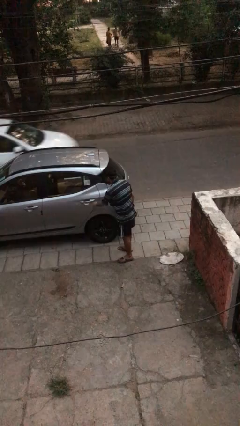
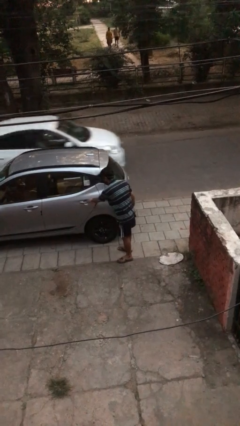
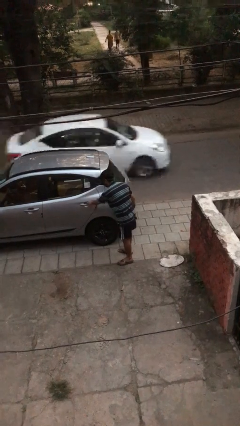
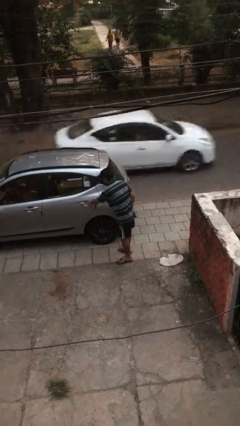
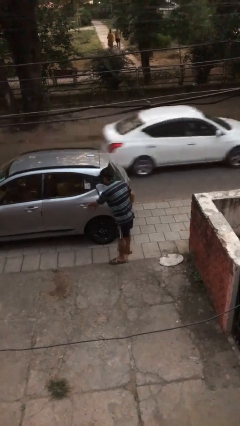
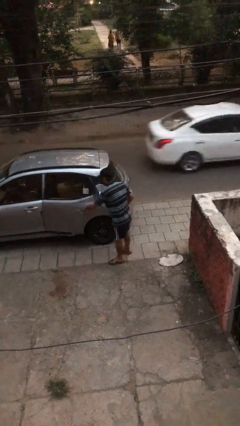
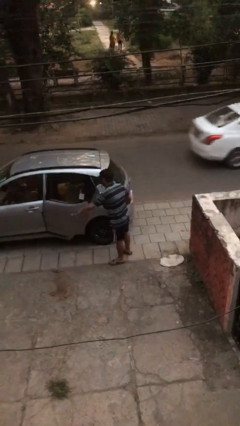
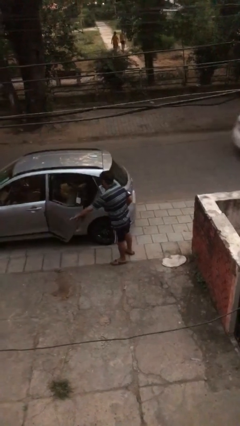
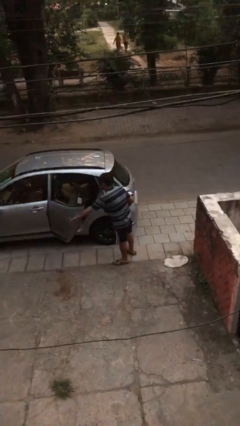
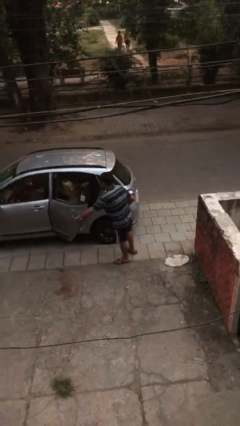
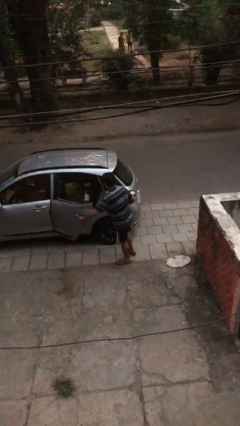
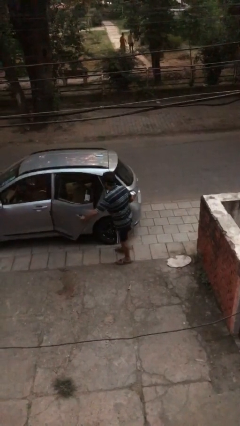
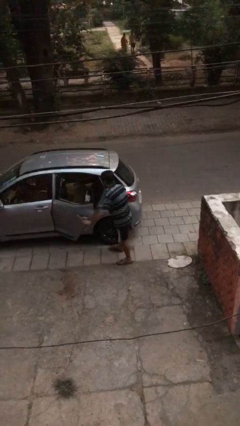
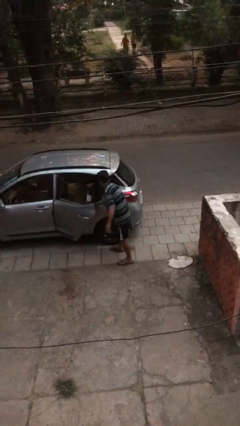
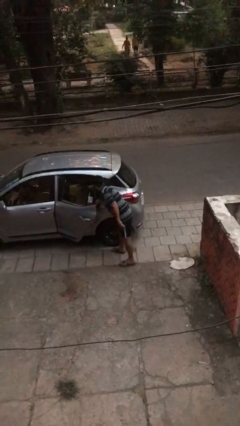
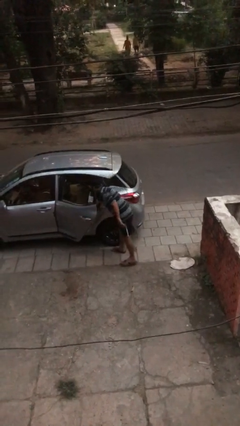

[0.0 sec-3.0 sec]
person opens car door

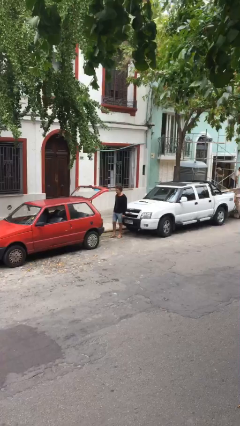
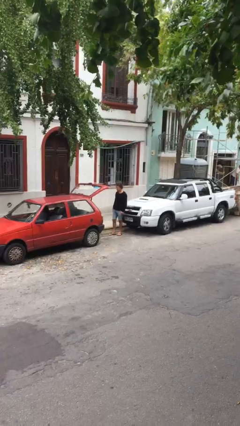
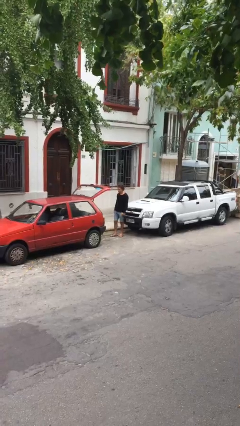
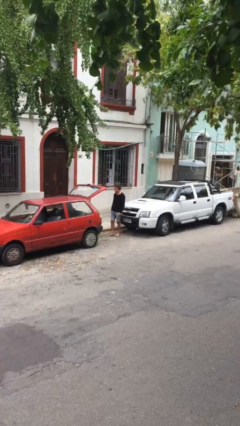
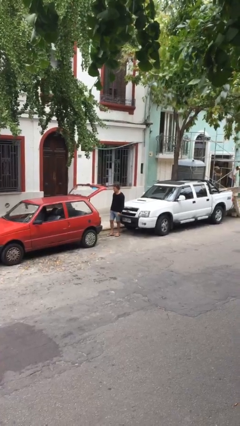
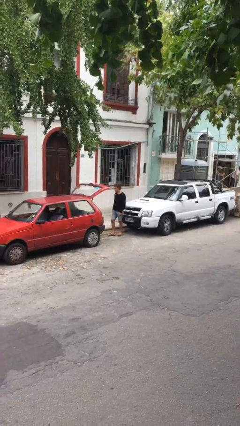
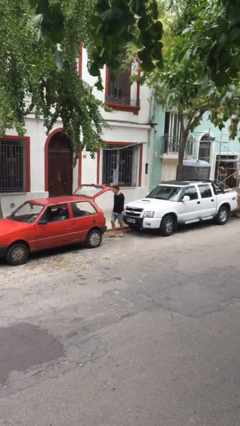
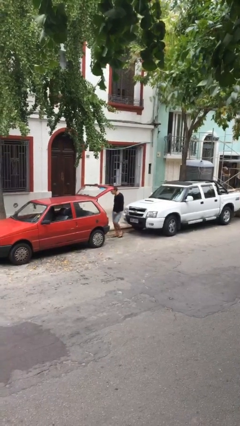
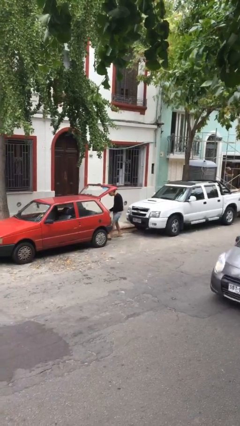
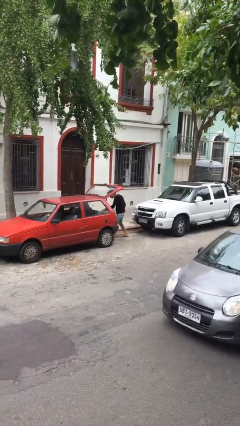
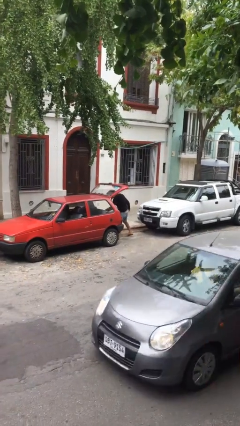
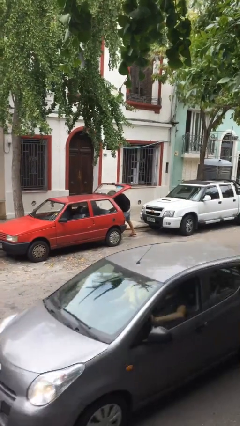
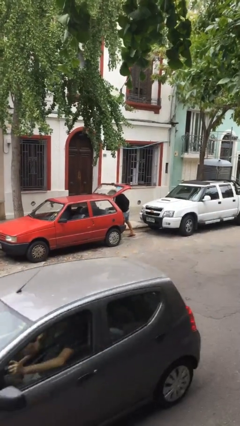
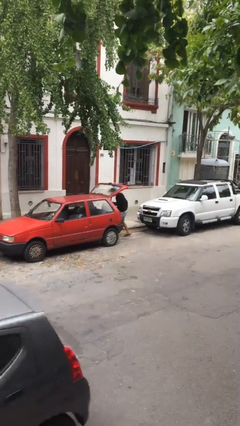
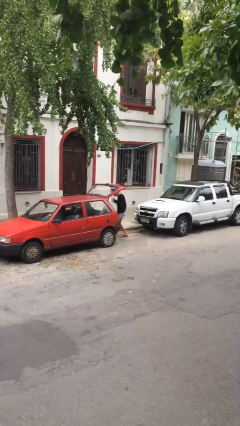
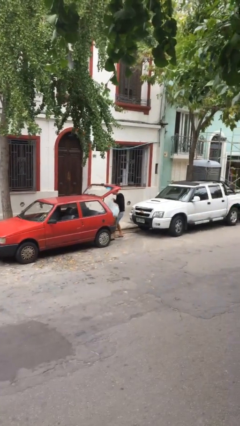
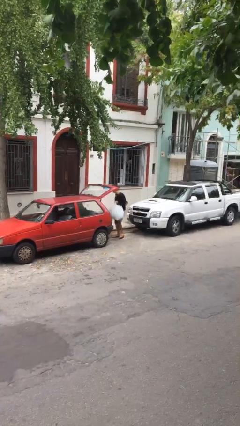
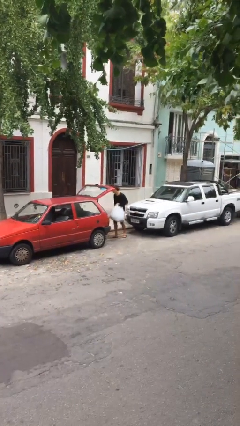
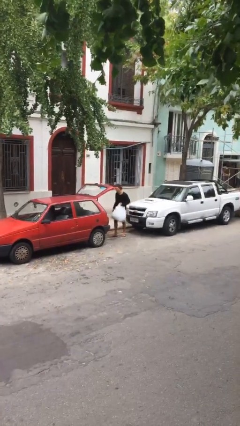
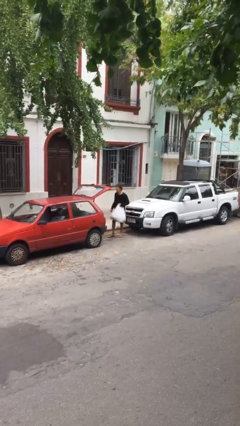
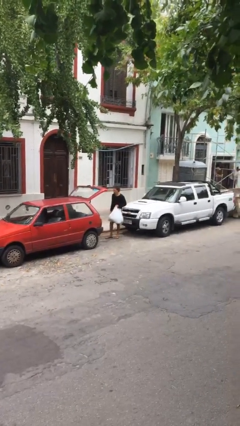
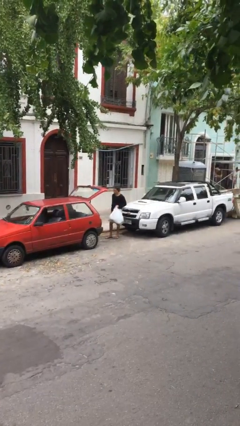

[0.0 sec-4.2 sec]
person unloads car

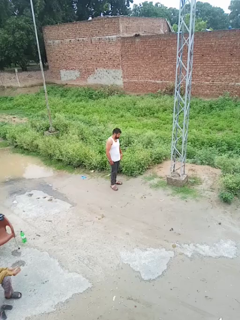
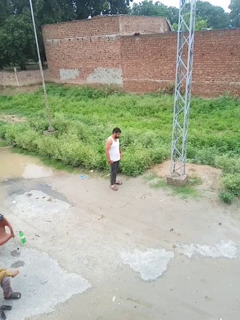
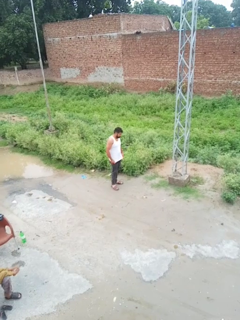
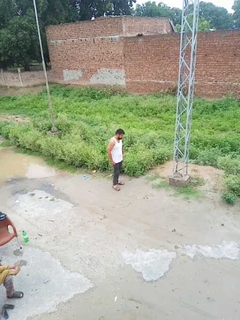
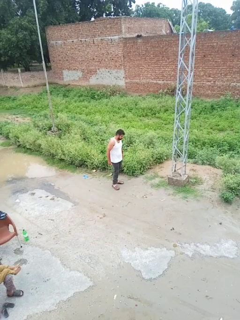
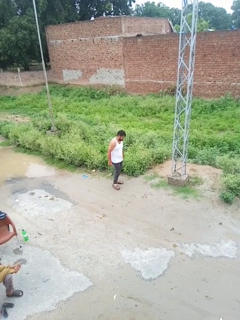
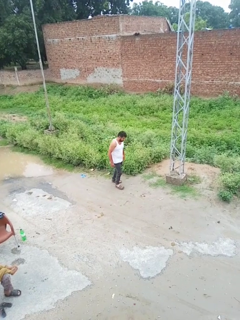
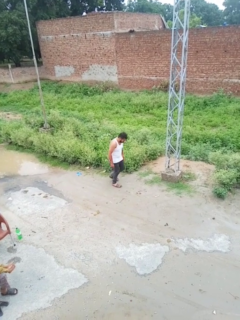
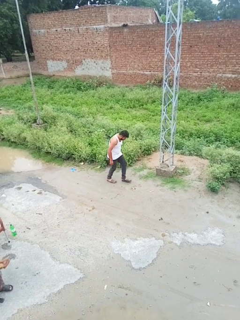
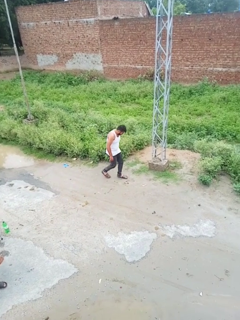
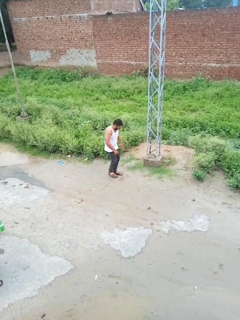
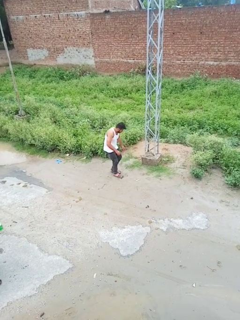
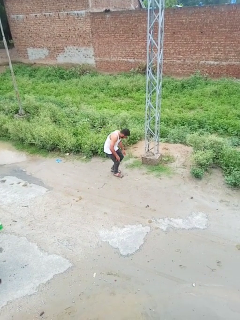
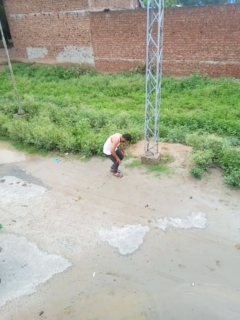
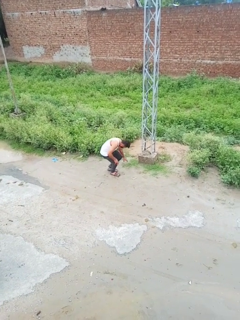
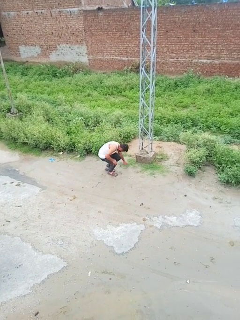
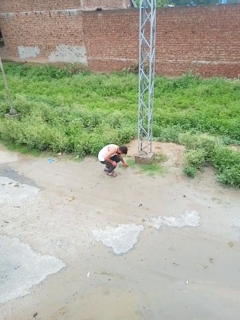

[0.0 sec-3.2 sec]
person trips on object on floor

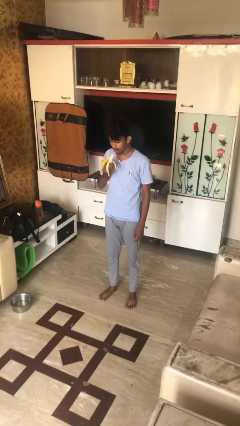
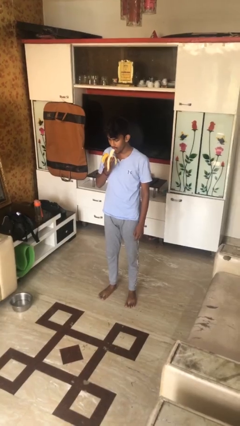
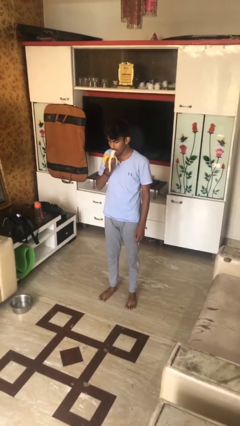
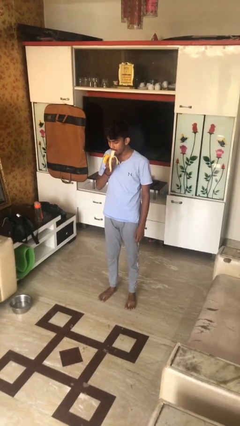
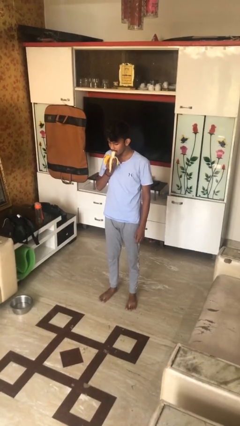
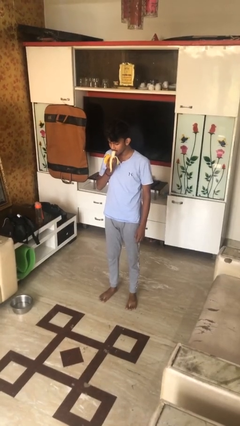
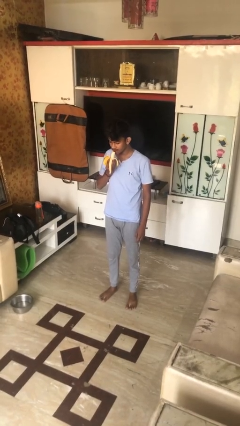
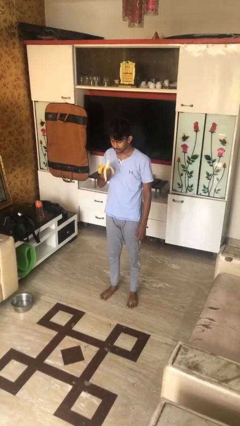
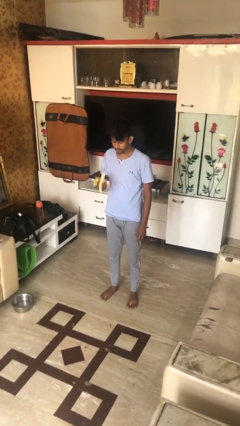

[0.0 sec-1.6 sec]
person eats banana

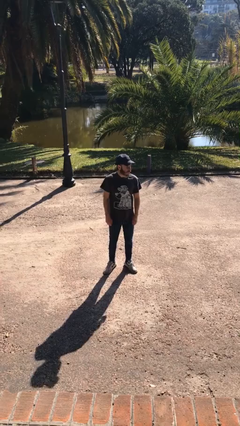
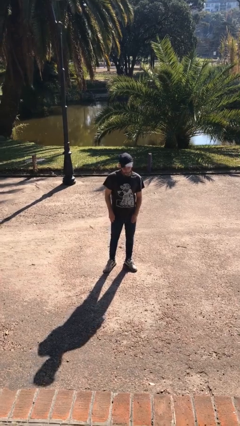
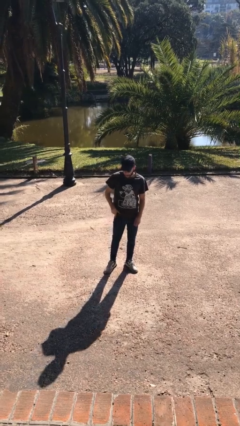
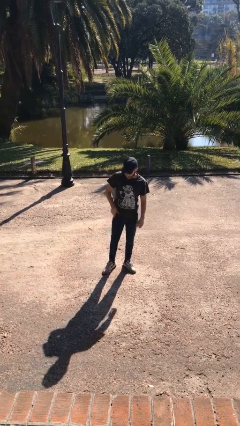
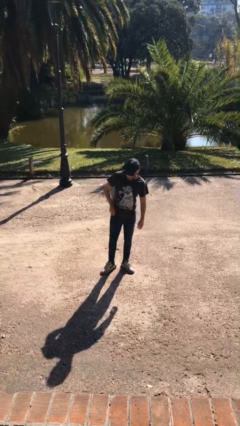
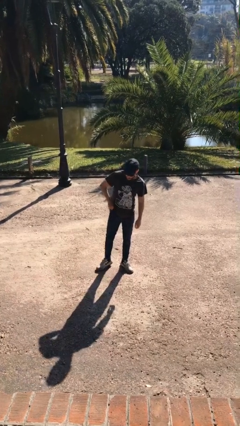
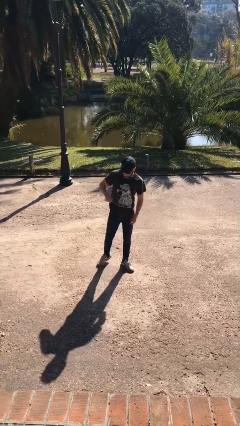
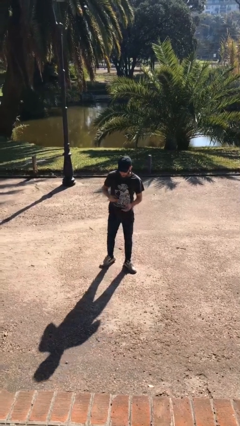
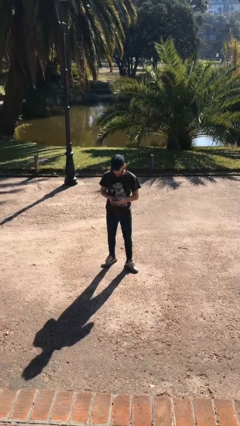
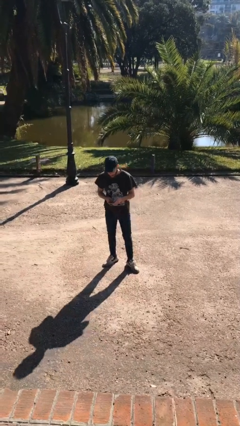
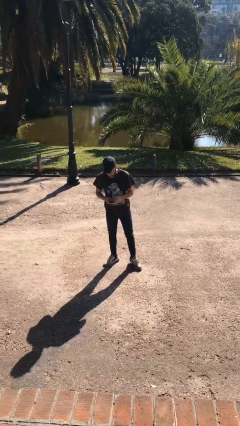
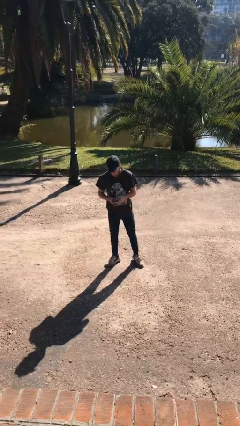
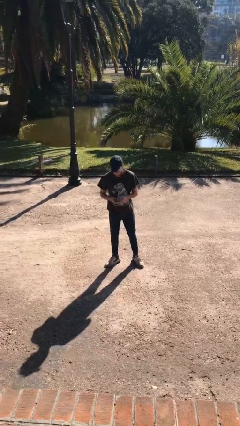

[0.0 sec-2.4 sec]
person takes phone from pocket

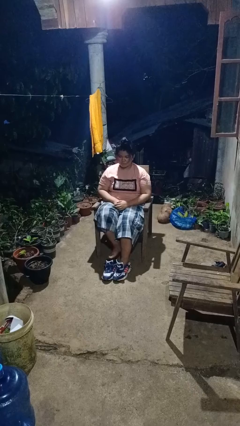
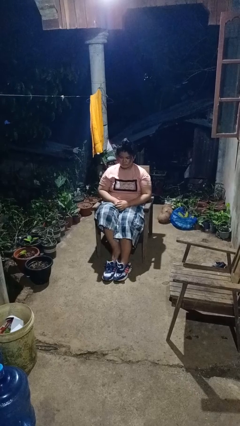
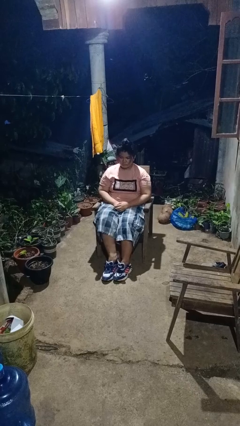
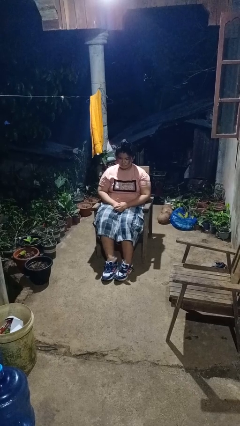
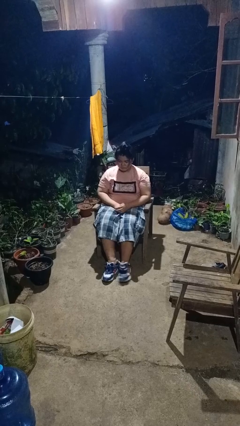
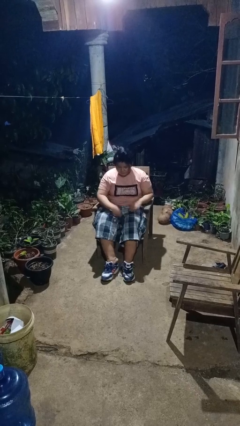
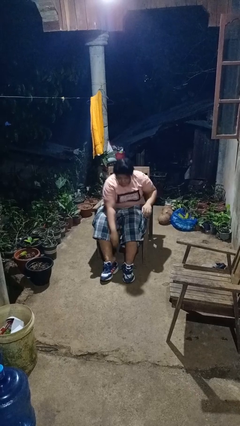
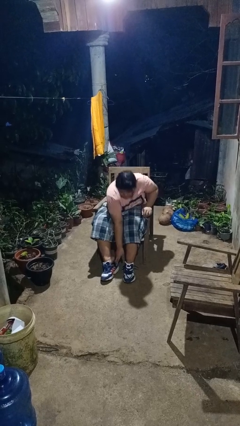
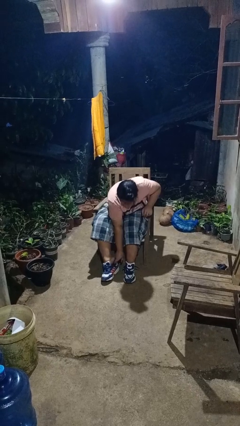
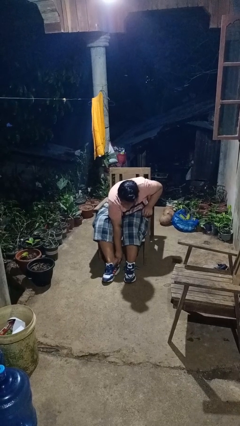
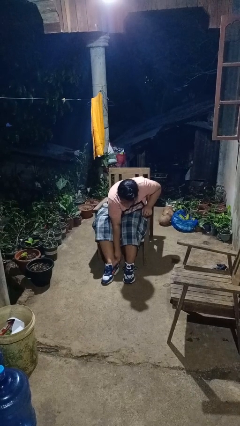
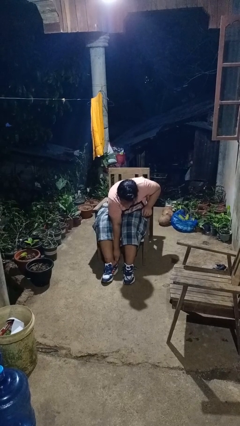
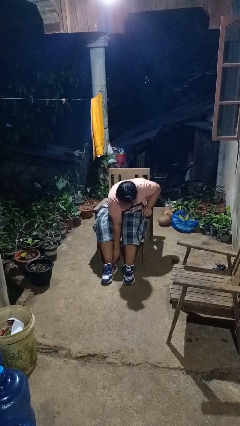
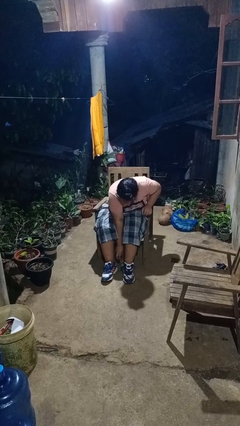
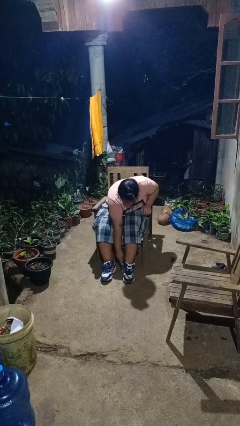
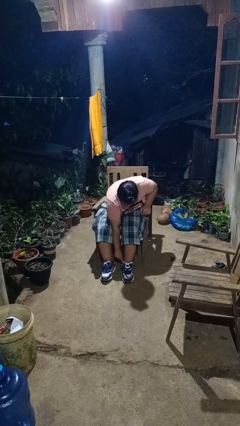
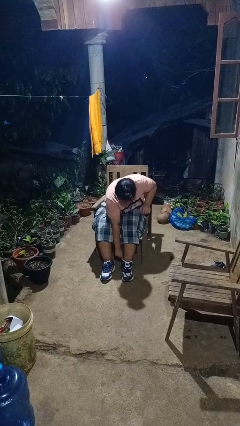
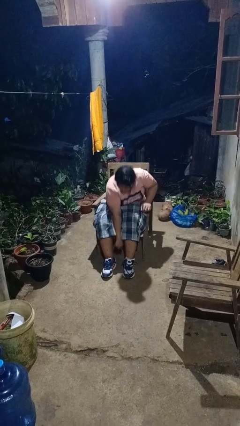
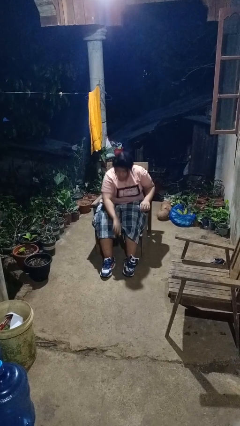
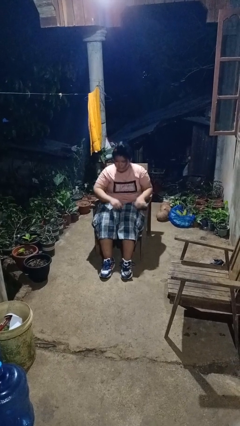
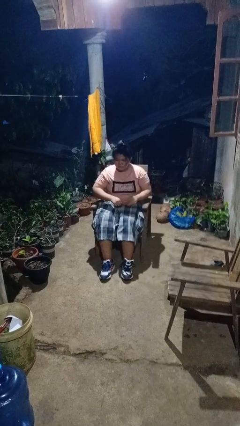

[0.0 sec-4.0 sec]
person puts on shoes
